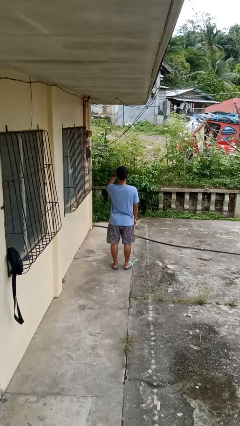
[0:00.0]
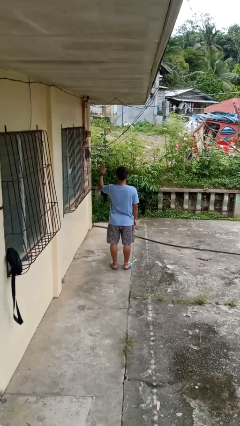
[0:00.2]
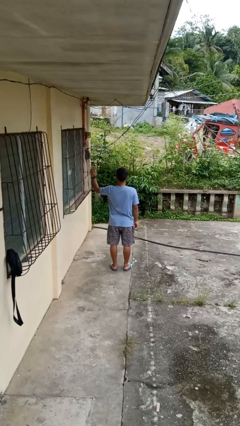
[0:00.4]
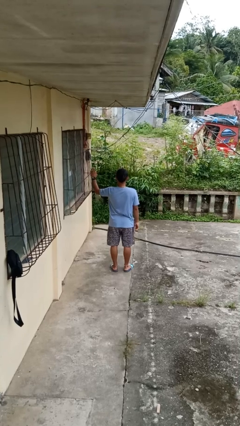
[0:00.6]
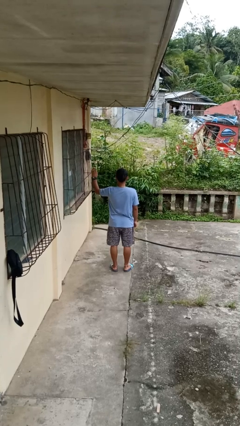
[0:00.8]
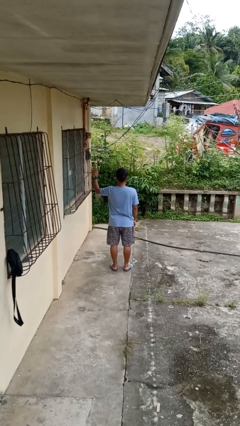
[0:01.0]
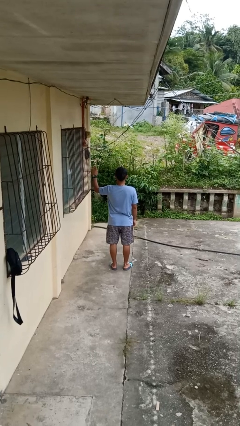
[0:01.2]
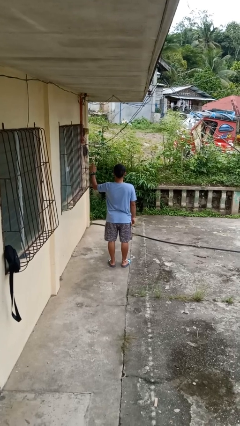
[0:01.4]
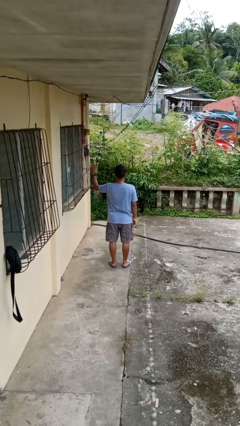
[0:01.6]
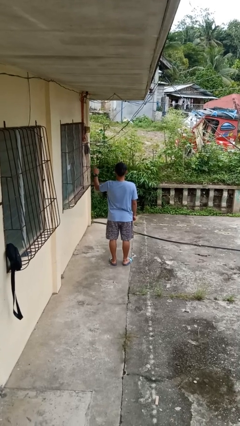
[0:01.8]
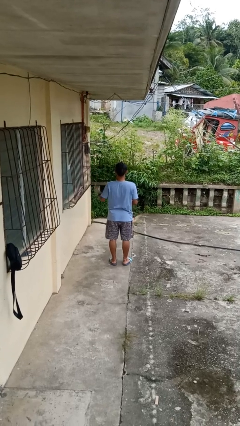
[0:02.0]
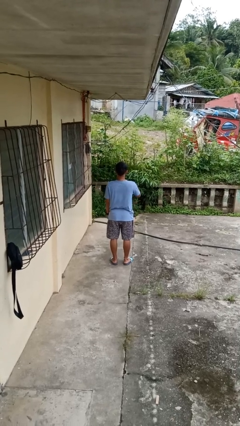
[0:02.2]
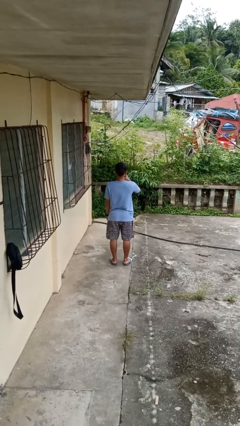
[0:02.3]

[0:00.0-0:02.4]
person gestures swipe left

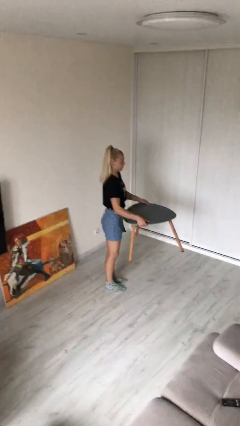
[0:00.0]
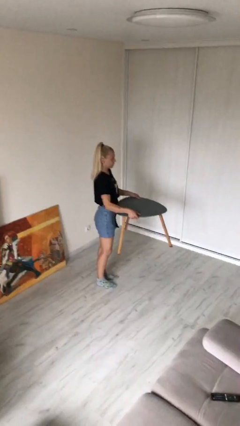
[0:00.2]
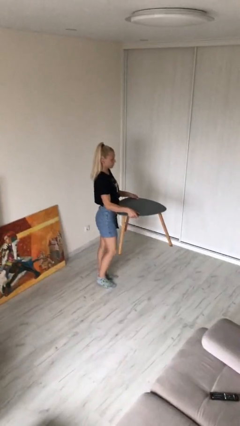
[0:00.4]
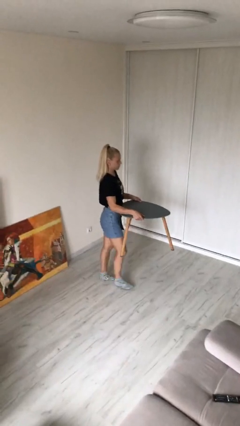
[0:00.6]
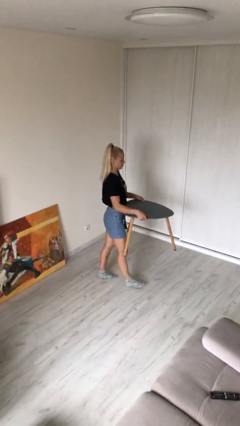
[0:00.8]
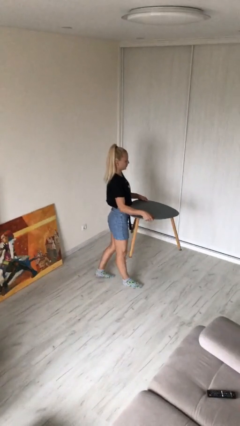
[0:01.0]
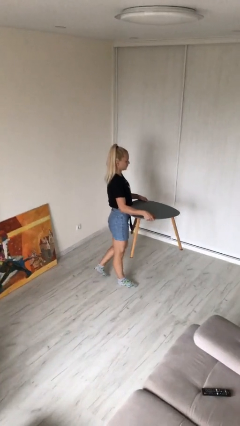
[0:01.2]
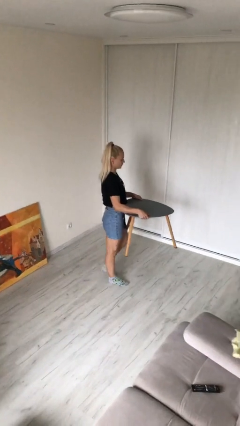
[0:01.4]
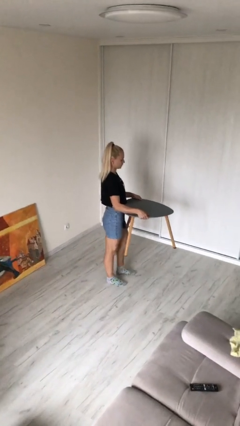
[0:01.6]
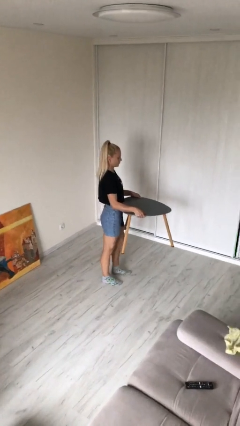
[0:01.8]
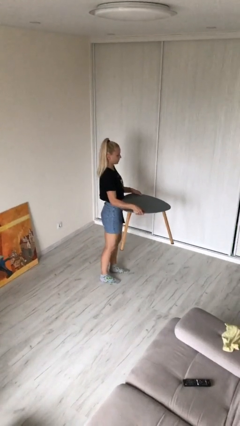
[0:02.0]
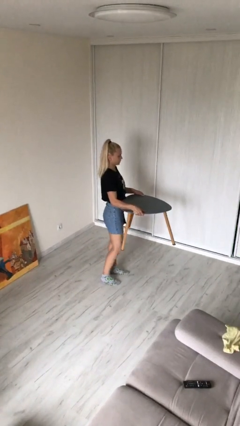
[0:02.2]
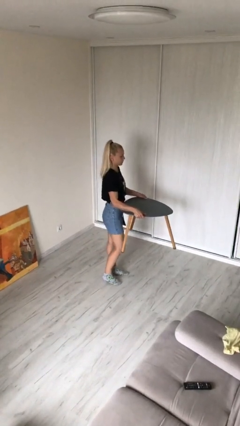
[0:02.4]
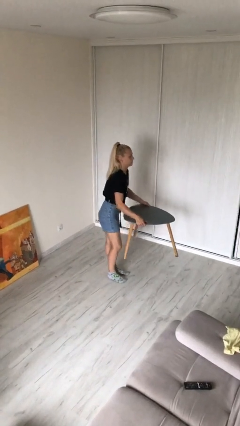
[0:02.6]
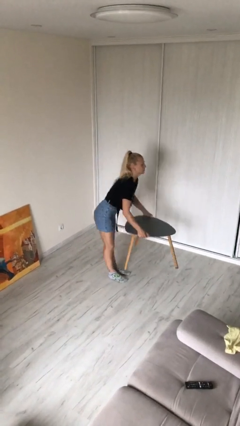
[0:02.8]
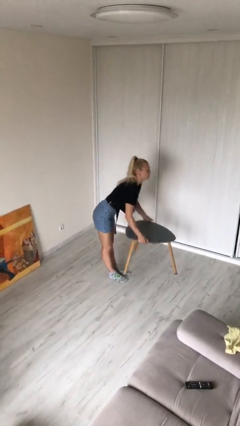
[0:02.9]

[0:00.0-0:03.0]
person carries heavy object

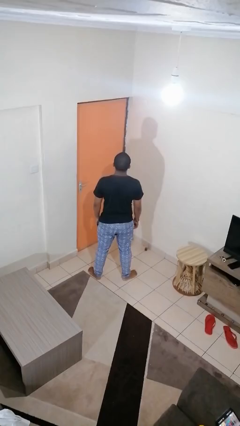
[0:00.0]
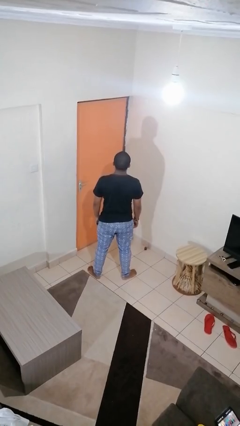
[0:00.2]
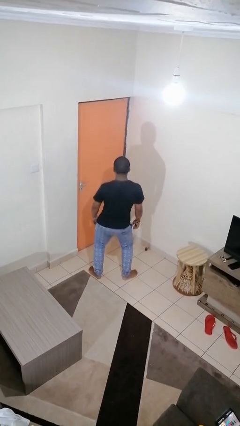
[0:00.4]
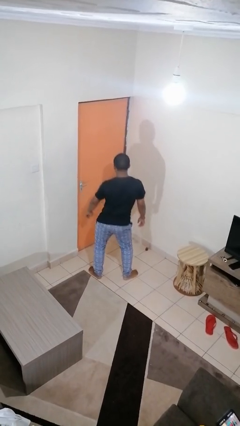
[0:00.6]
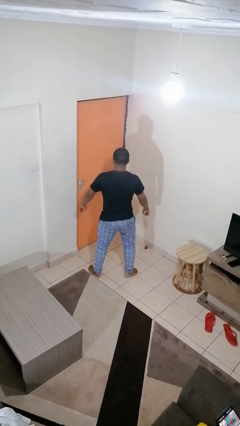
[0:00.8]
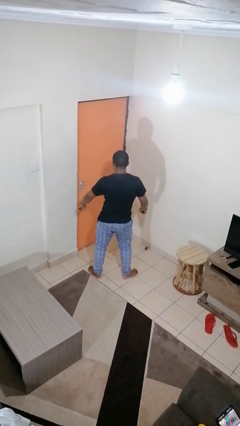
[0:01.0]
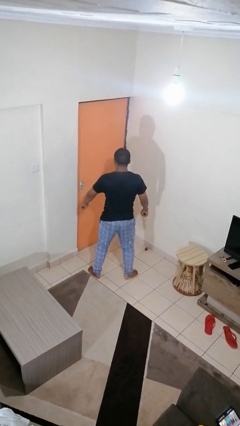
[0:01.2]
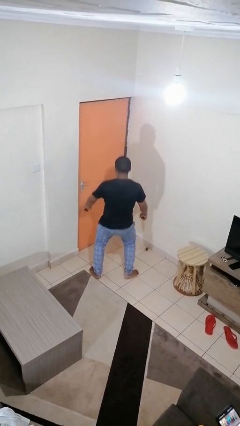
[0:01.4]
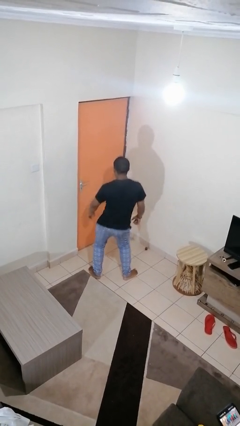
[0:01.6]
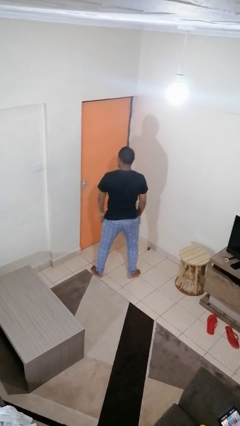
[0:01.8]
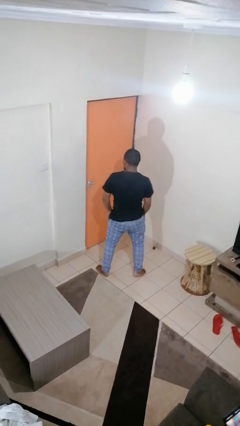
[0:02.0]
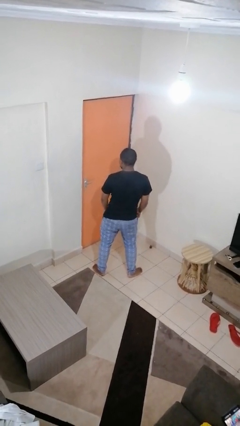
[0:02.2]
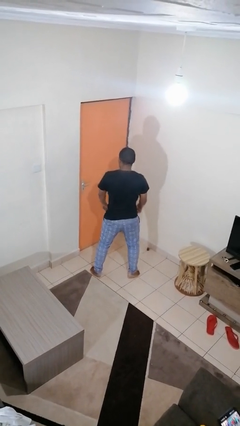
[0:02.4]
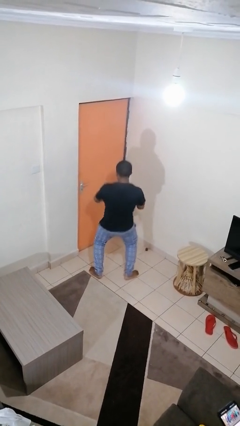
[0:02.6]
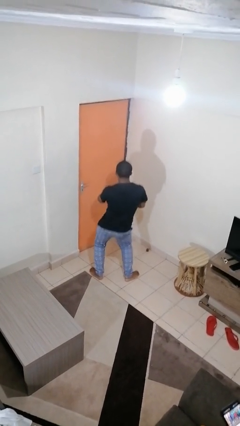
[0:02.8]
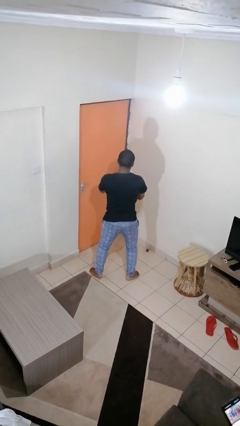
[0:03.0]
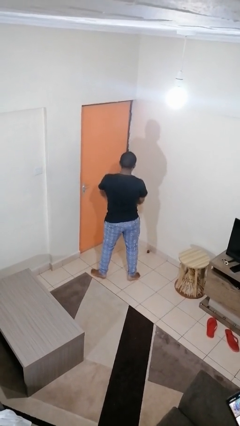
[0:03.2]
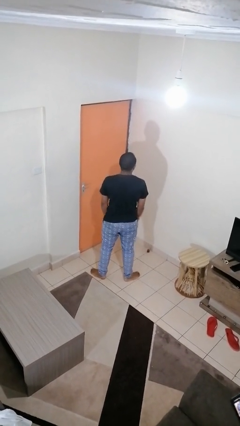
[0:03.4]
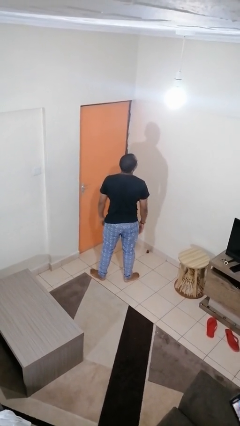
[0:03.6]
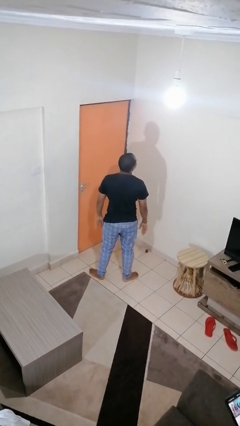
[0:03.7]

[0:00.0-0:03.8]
person dances in place

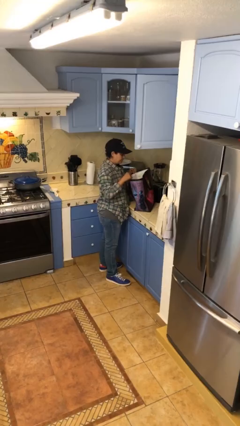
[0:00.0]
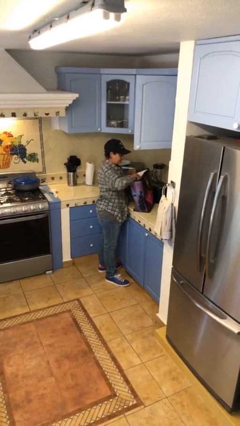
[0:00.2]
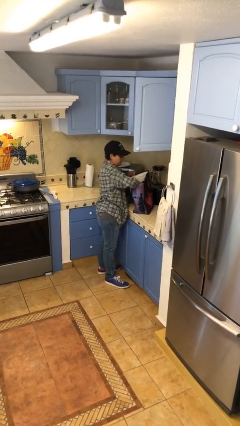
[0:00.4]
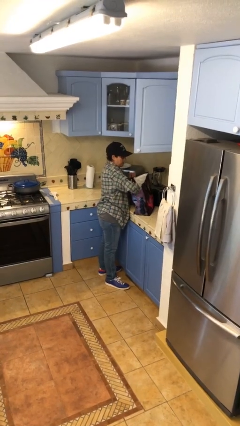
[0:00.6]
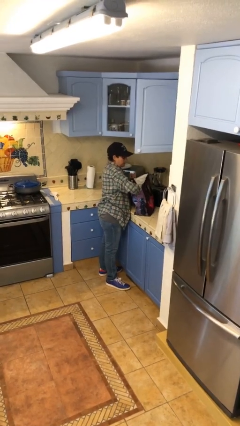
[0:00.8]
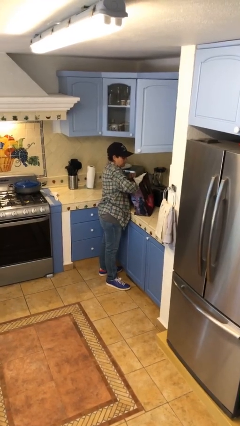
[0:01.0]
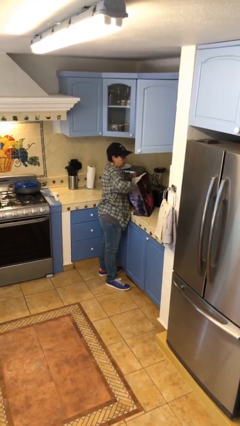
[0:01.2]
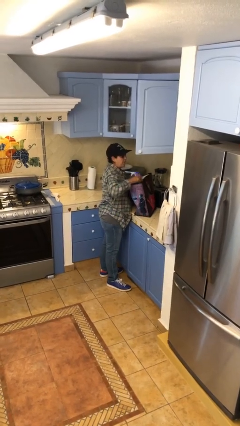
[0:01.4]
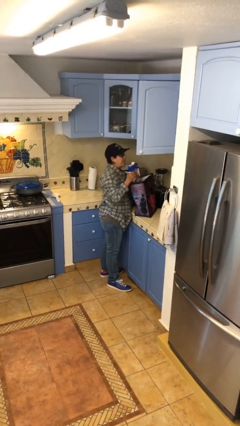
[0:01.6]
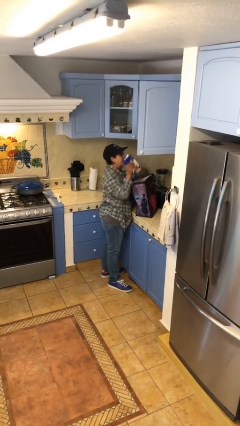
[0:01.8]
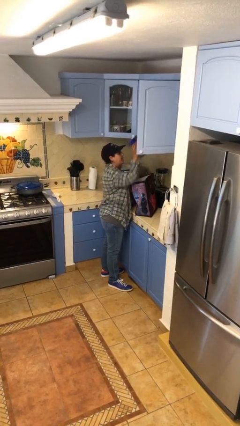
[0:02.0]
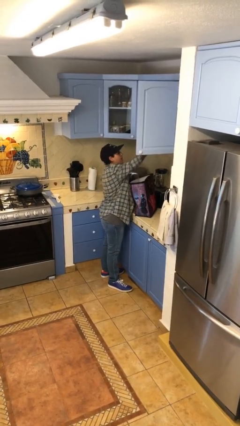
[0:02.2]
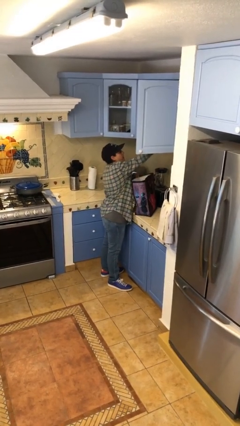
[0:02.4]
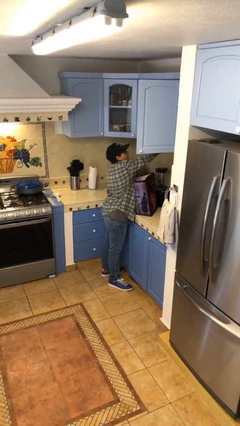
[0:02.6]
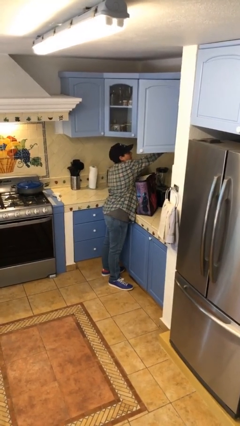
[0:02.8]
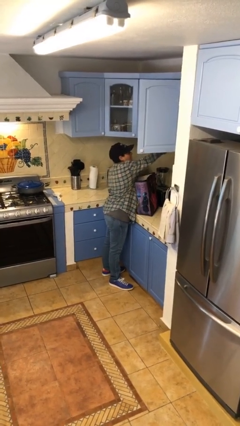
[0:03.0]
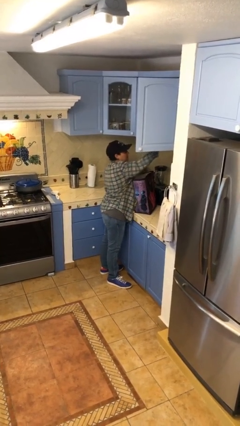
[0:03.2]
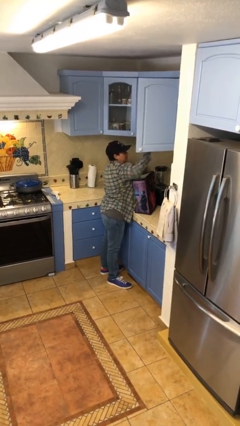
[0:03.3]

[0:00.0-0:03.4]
person loads groceries into cabinet

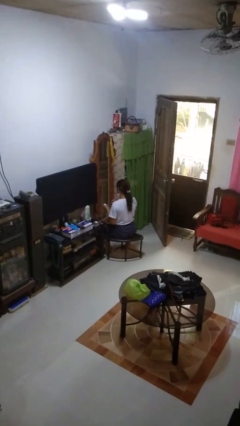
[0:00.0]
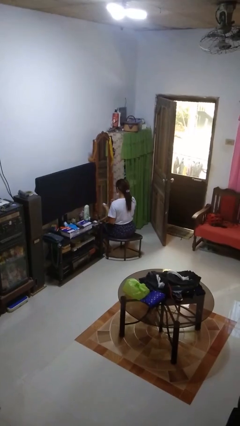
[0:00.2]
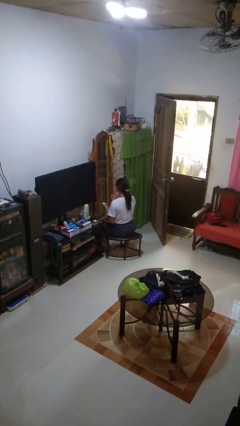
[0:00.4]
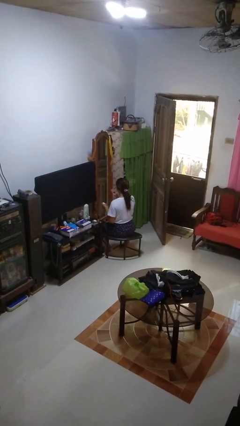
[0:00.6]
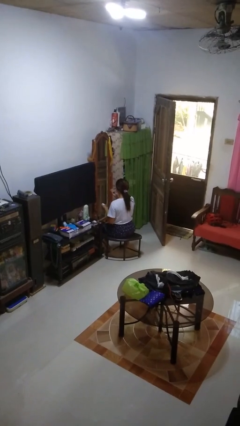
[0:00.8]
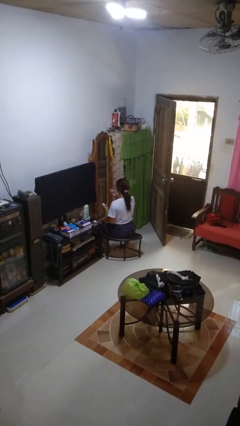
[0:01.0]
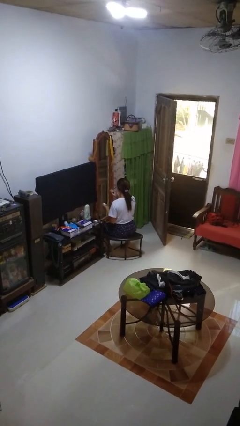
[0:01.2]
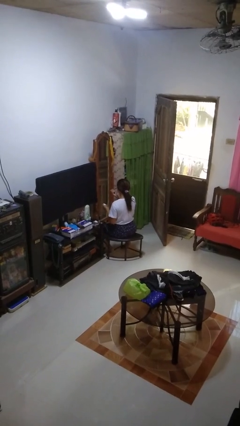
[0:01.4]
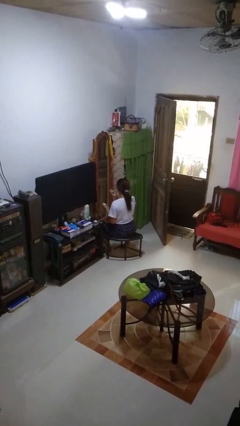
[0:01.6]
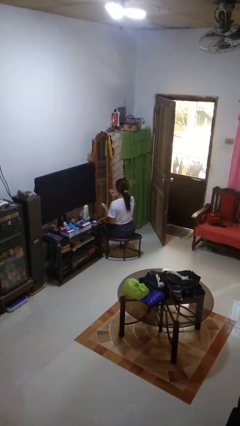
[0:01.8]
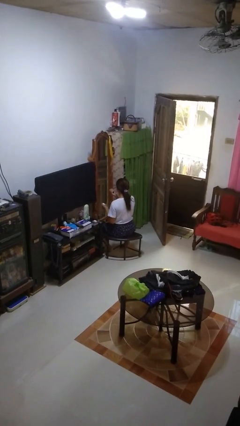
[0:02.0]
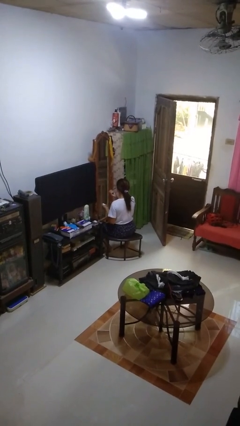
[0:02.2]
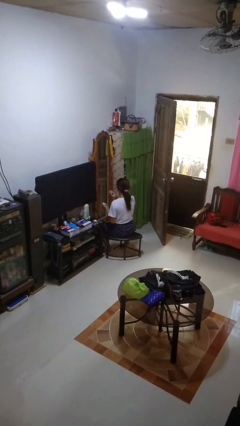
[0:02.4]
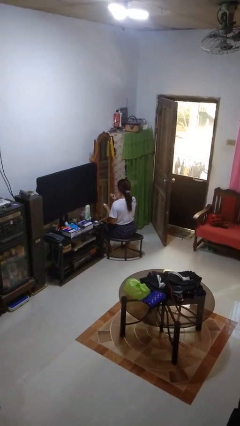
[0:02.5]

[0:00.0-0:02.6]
person applies eye makeup

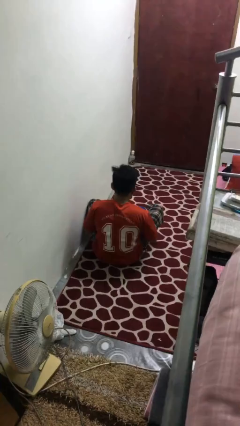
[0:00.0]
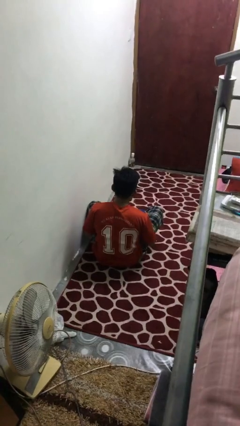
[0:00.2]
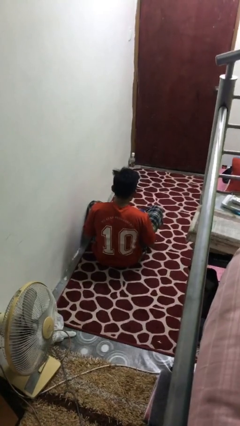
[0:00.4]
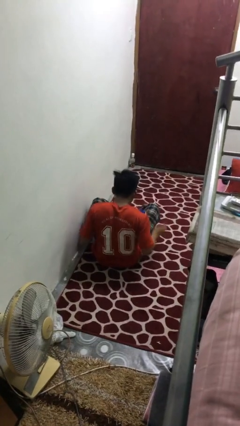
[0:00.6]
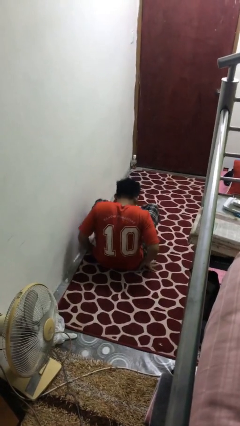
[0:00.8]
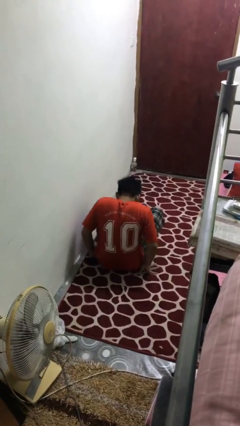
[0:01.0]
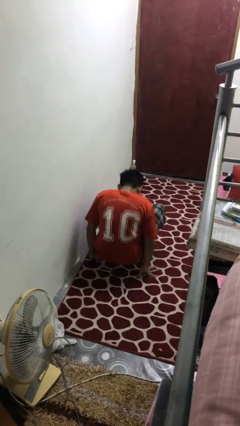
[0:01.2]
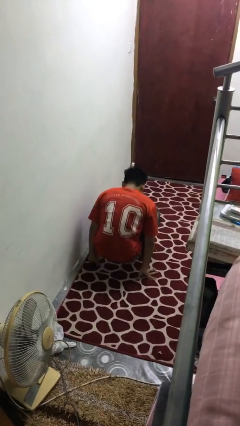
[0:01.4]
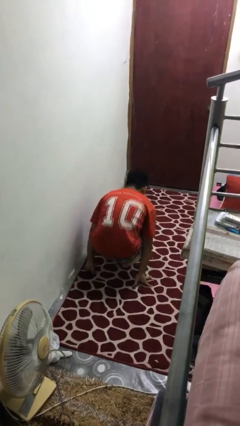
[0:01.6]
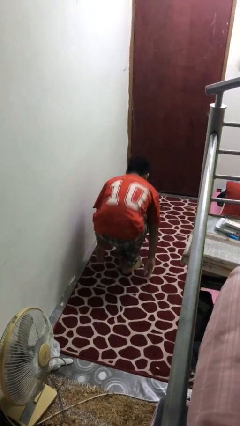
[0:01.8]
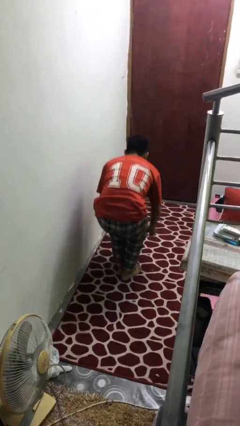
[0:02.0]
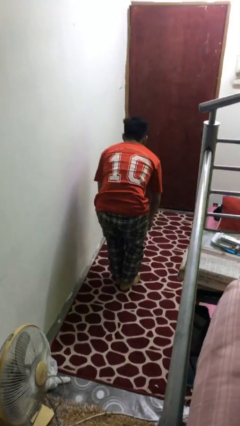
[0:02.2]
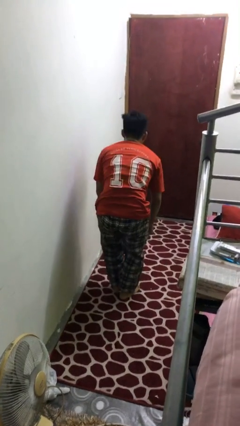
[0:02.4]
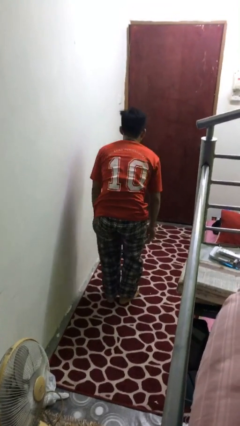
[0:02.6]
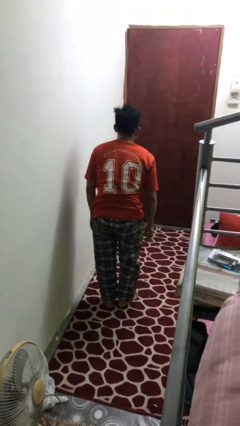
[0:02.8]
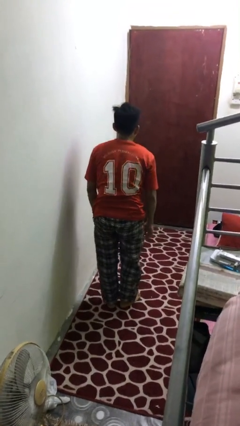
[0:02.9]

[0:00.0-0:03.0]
person stands up from floor
